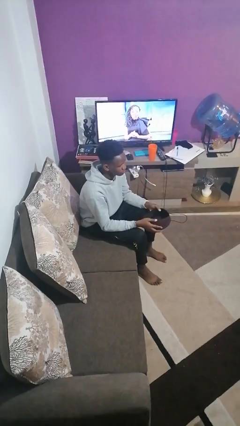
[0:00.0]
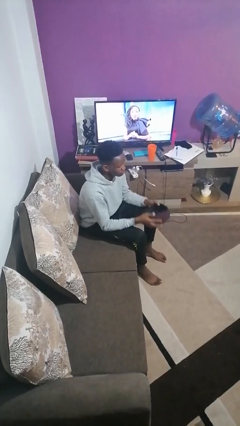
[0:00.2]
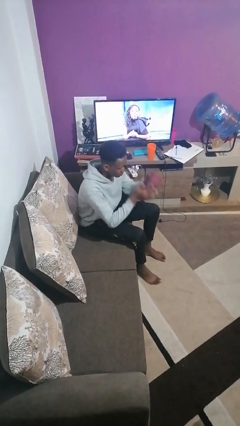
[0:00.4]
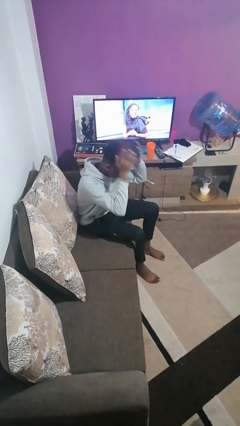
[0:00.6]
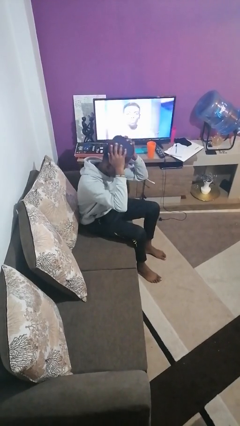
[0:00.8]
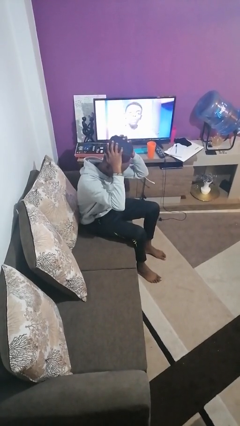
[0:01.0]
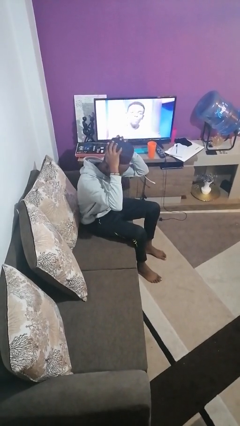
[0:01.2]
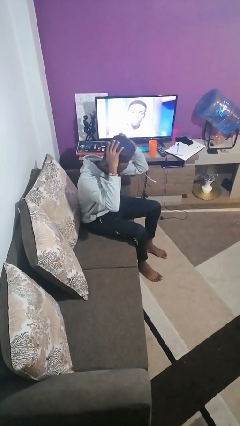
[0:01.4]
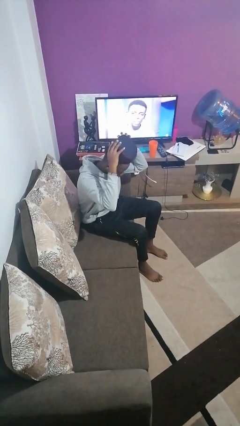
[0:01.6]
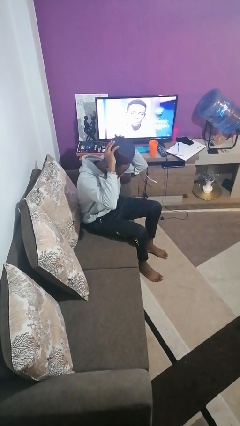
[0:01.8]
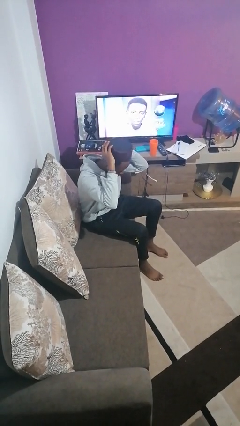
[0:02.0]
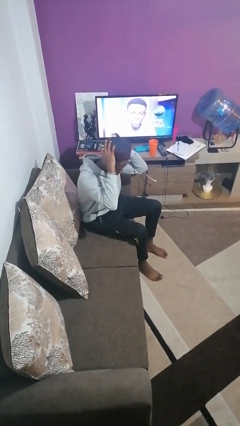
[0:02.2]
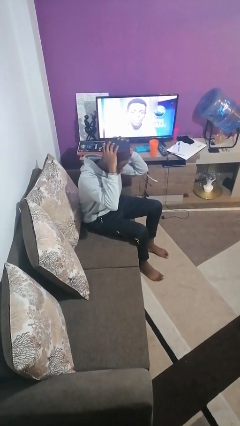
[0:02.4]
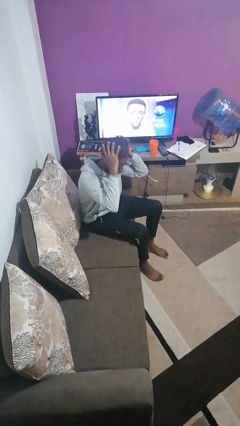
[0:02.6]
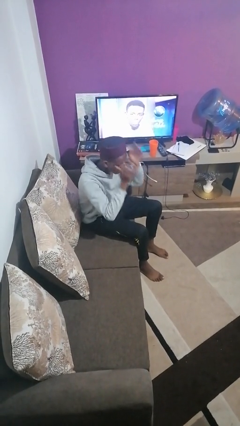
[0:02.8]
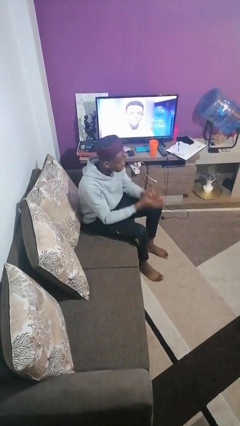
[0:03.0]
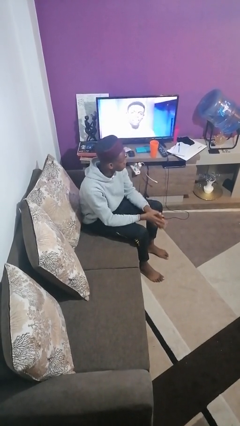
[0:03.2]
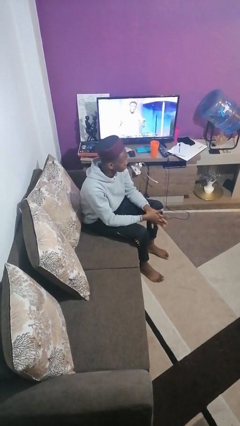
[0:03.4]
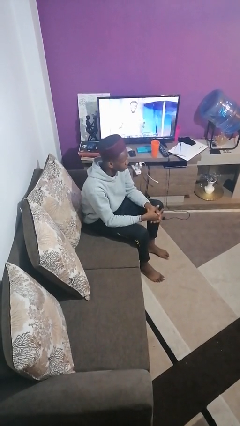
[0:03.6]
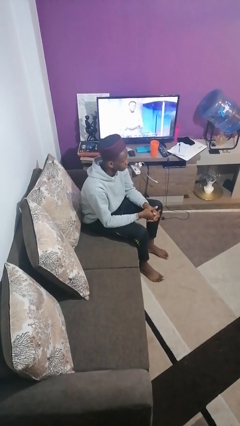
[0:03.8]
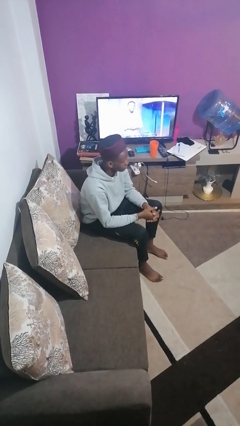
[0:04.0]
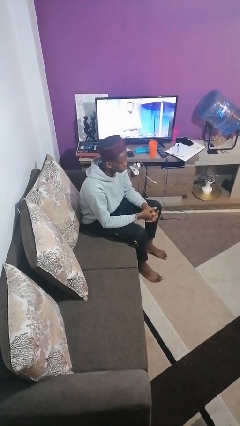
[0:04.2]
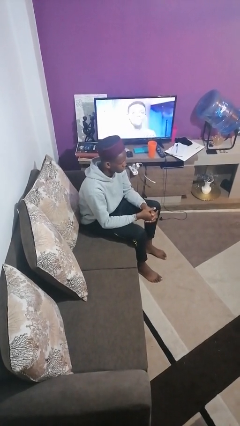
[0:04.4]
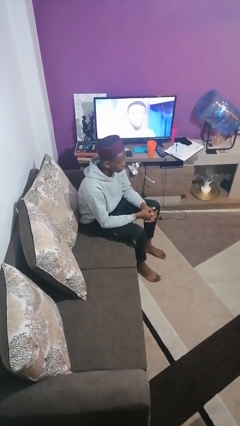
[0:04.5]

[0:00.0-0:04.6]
person puts on hat

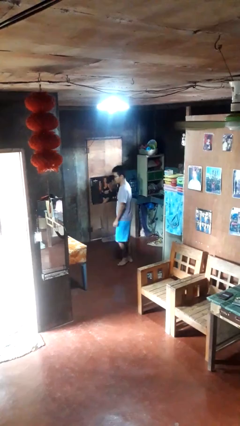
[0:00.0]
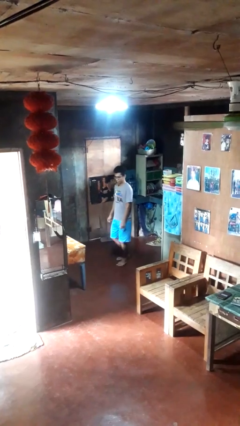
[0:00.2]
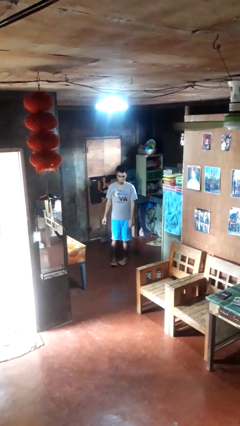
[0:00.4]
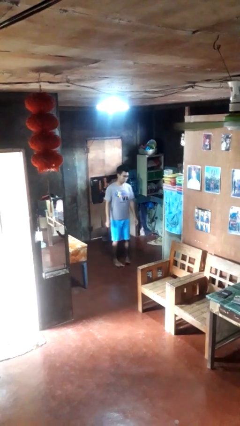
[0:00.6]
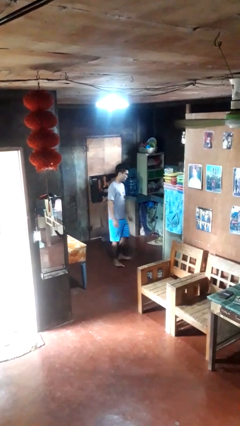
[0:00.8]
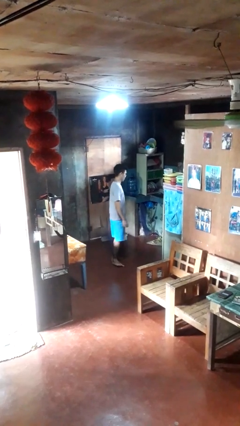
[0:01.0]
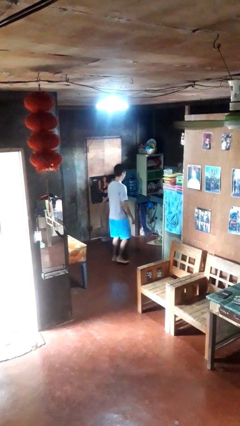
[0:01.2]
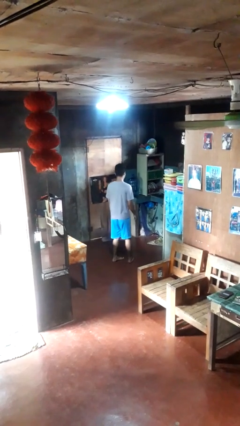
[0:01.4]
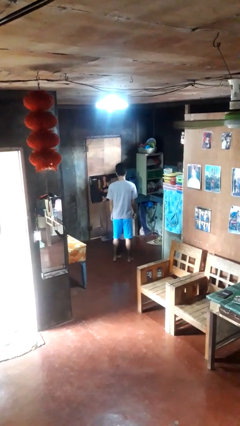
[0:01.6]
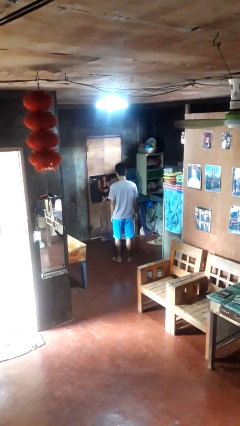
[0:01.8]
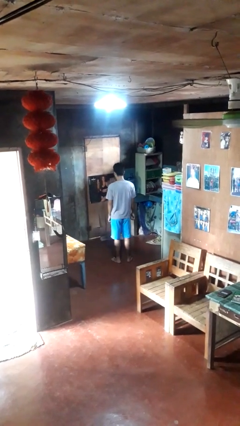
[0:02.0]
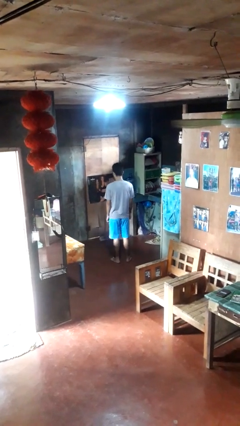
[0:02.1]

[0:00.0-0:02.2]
person twirls

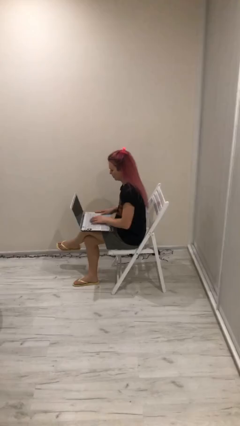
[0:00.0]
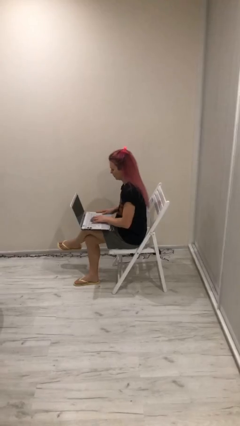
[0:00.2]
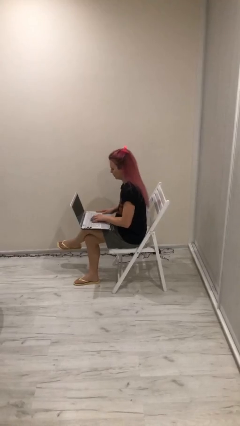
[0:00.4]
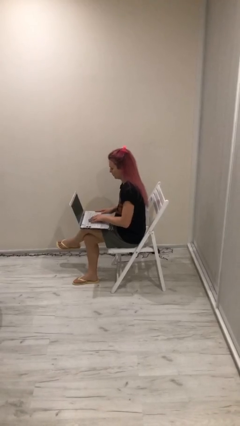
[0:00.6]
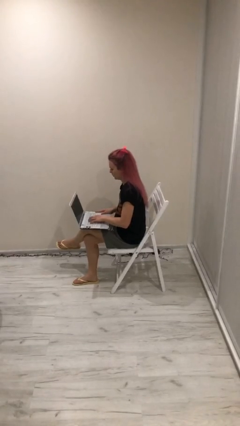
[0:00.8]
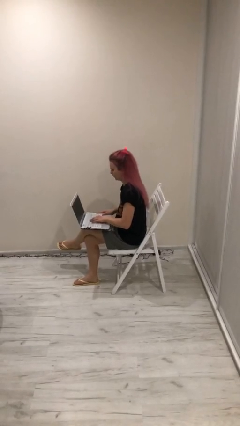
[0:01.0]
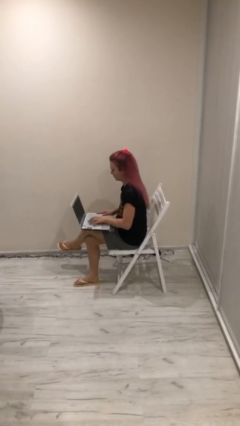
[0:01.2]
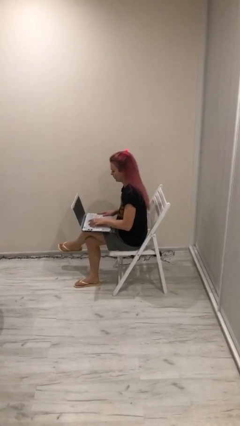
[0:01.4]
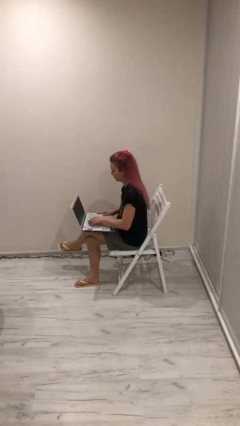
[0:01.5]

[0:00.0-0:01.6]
person interacts with laptop

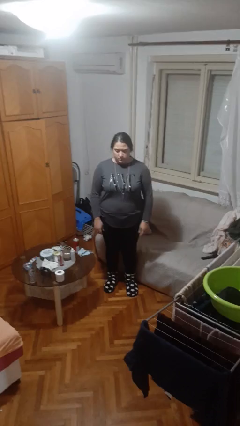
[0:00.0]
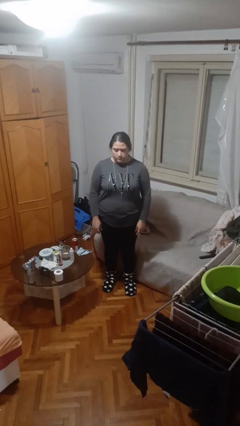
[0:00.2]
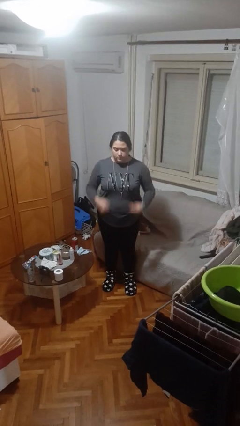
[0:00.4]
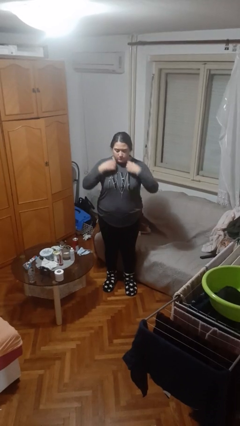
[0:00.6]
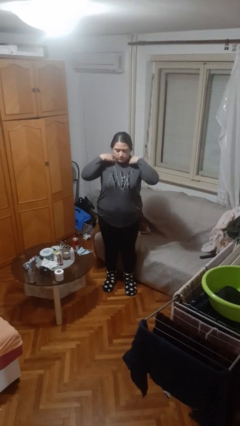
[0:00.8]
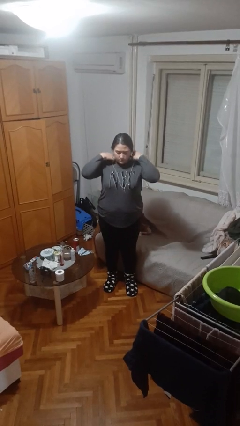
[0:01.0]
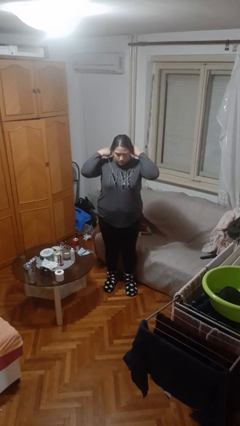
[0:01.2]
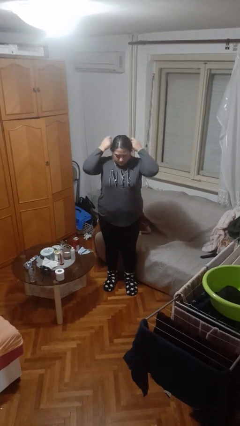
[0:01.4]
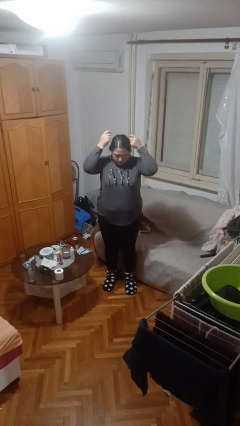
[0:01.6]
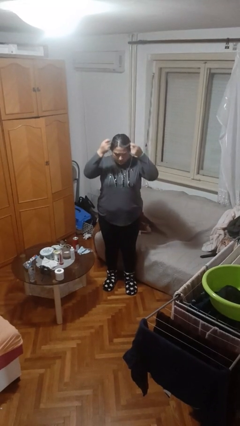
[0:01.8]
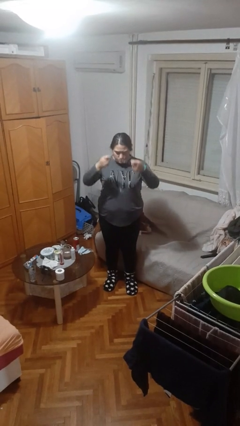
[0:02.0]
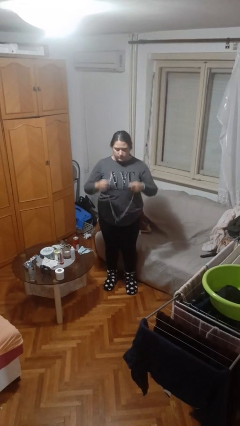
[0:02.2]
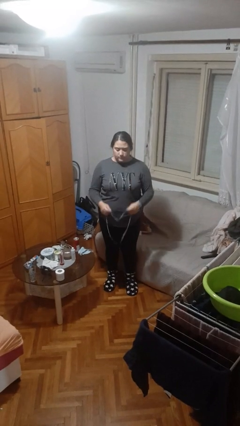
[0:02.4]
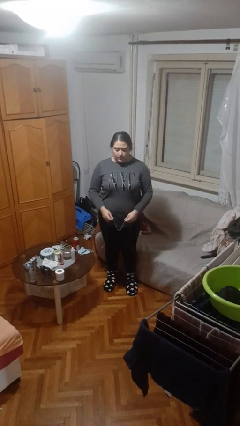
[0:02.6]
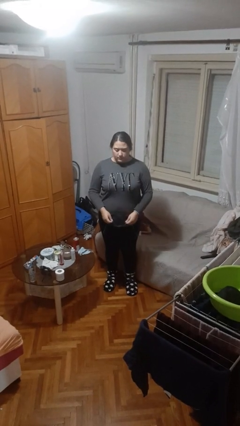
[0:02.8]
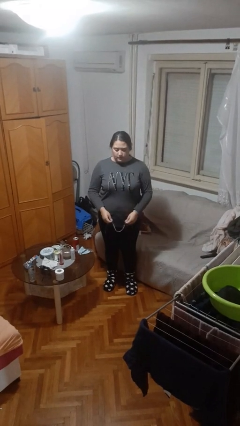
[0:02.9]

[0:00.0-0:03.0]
person takes off necklace

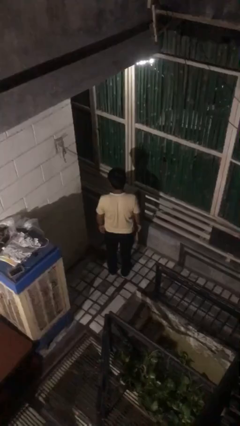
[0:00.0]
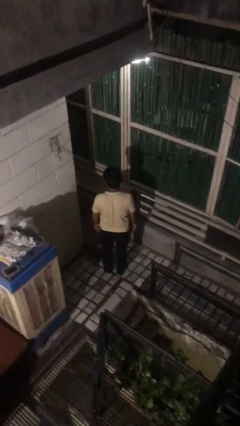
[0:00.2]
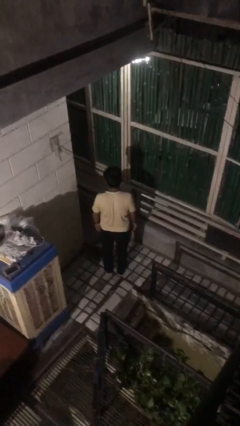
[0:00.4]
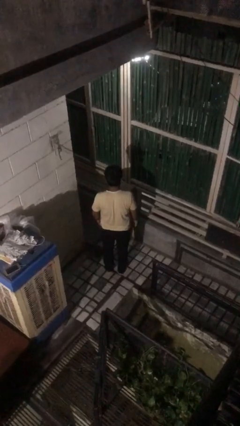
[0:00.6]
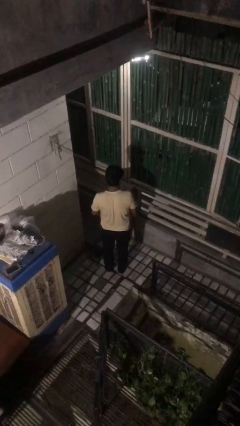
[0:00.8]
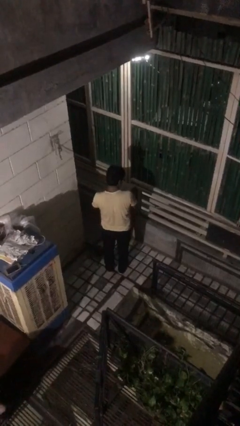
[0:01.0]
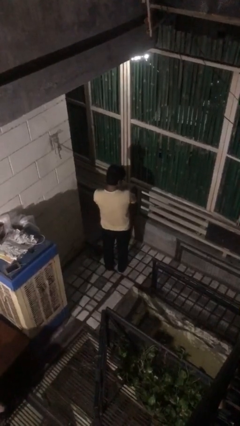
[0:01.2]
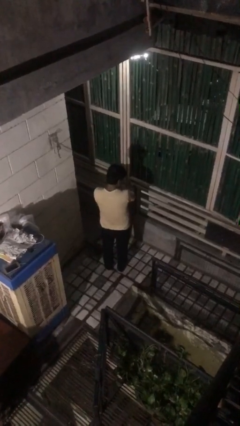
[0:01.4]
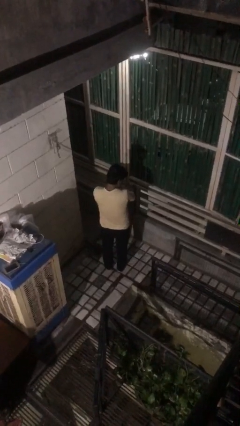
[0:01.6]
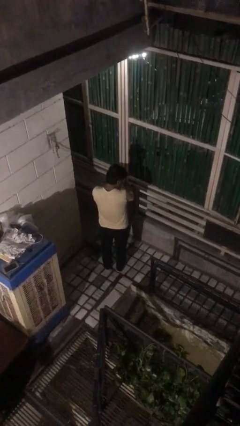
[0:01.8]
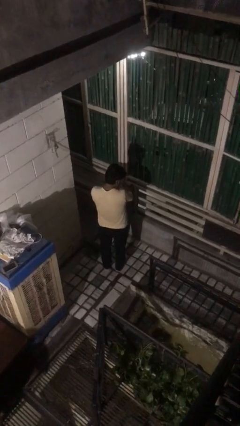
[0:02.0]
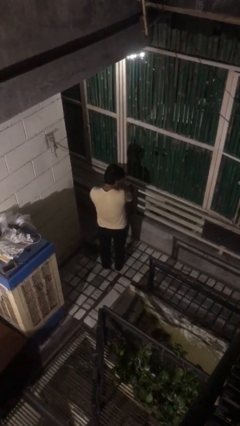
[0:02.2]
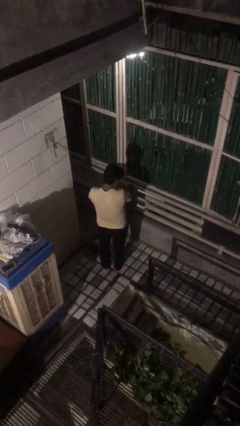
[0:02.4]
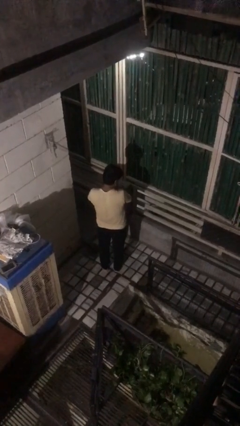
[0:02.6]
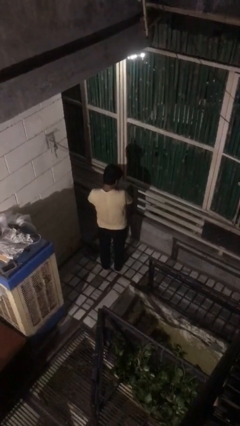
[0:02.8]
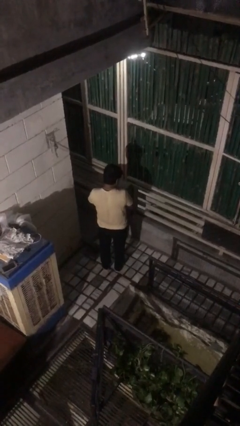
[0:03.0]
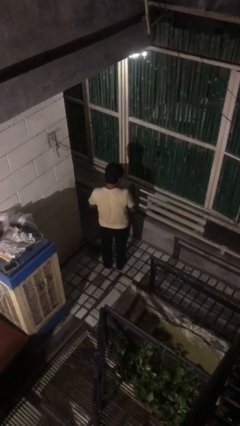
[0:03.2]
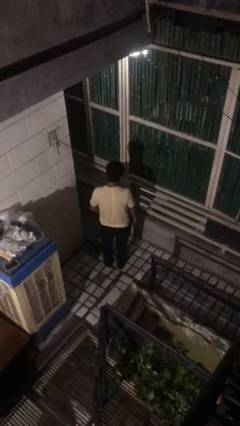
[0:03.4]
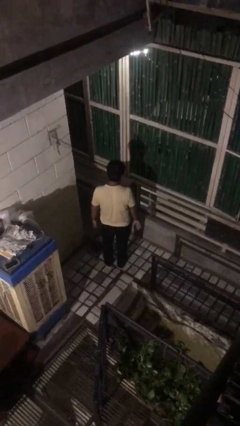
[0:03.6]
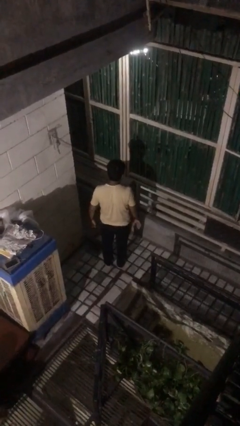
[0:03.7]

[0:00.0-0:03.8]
person swats bug

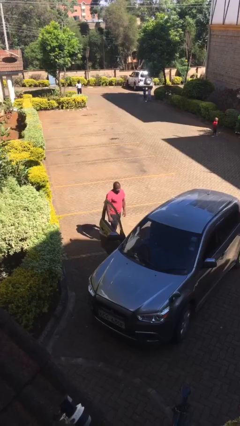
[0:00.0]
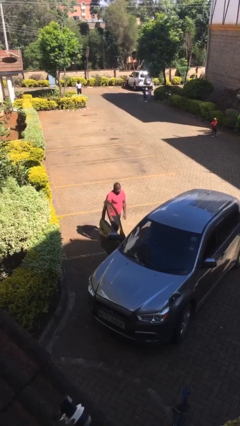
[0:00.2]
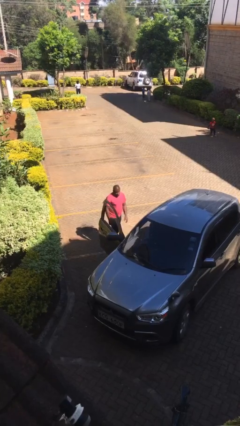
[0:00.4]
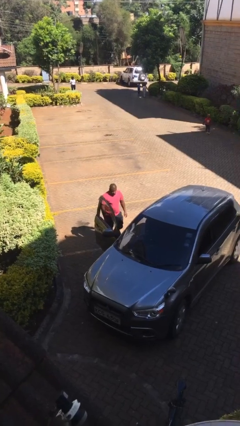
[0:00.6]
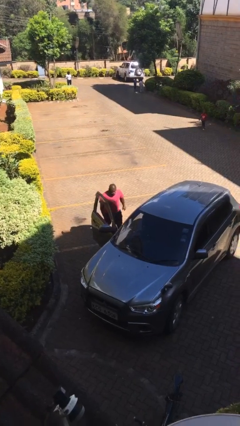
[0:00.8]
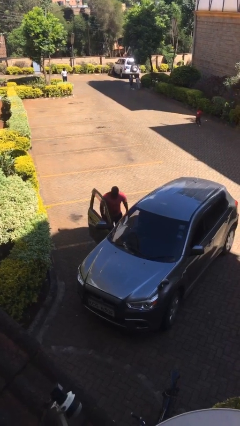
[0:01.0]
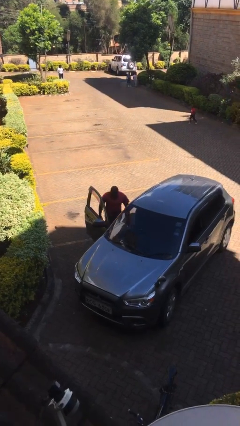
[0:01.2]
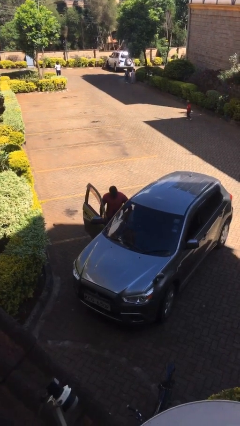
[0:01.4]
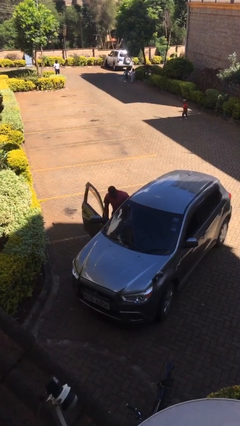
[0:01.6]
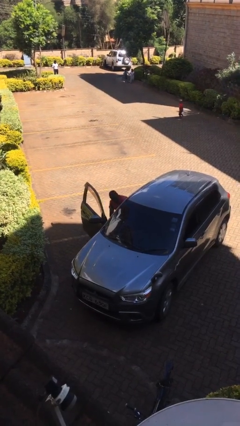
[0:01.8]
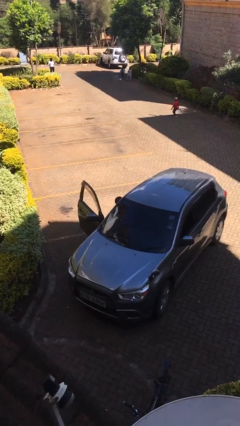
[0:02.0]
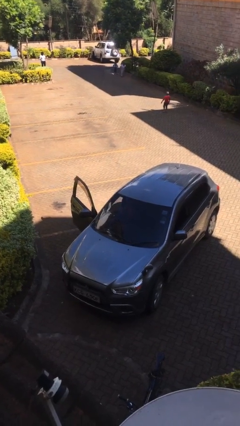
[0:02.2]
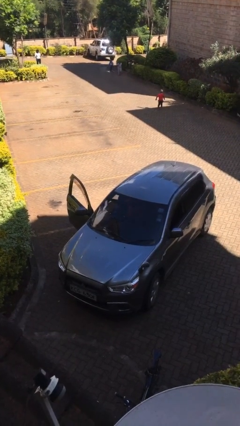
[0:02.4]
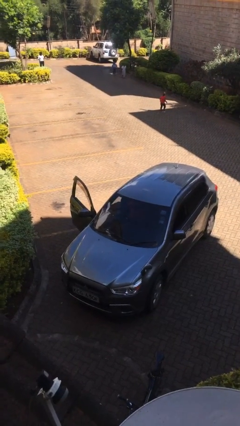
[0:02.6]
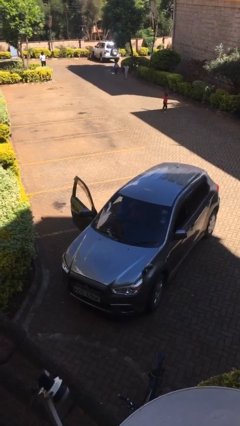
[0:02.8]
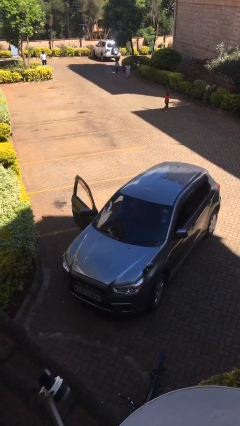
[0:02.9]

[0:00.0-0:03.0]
person enters car
